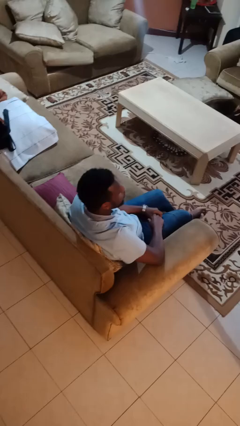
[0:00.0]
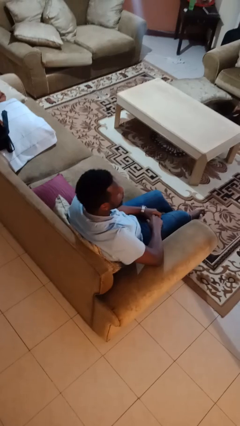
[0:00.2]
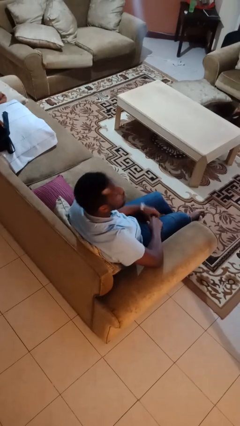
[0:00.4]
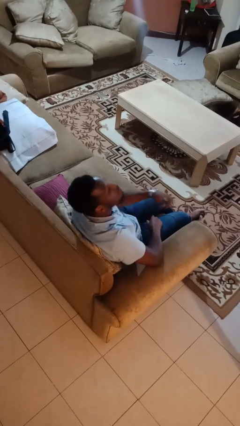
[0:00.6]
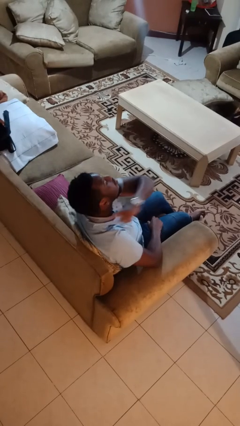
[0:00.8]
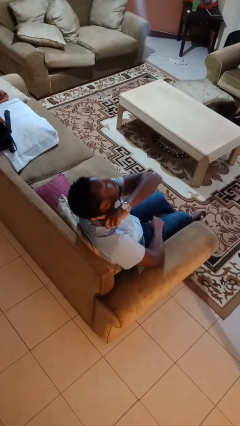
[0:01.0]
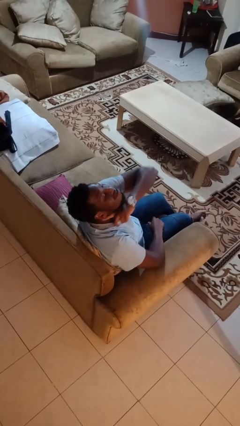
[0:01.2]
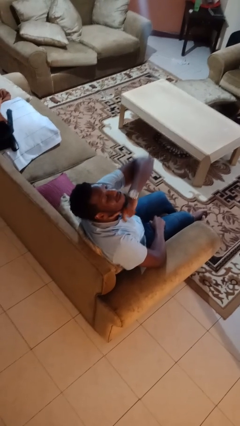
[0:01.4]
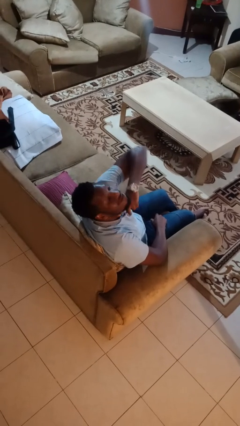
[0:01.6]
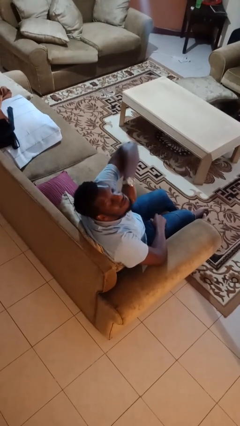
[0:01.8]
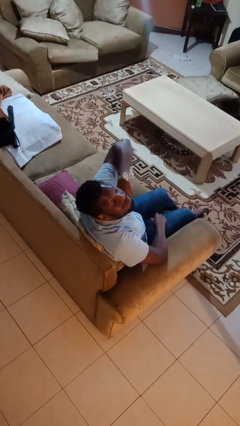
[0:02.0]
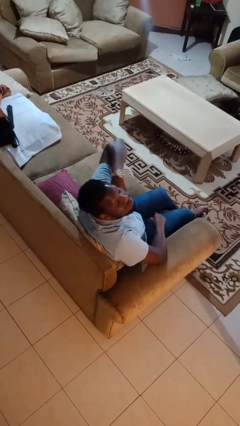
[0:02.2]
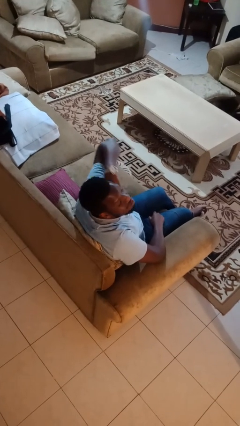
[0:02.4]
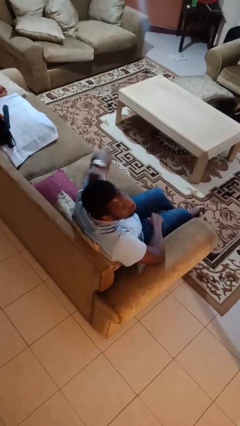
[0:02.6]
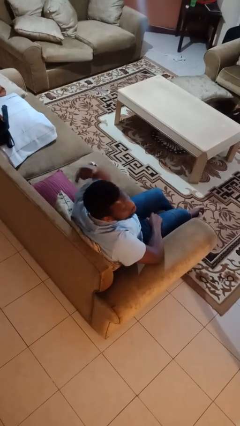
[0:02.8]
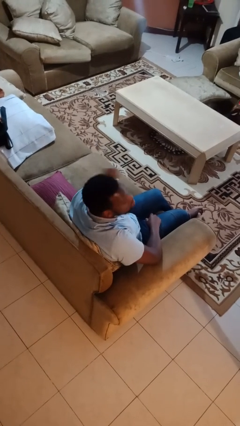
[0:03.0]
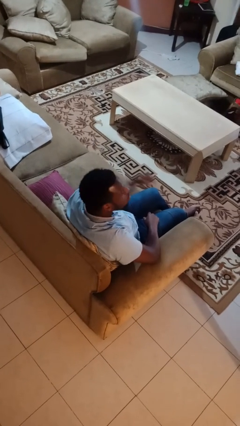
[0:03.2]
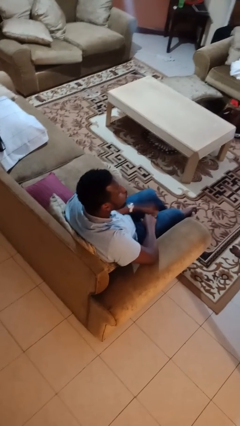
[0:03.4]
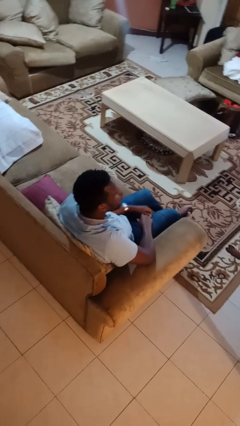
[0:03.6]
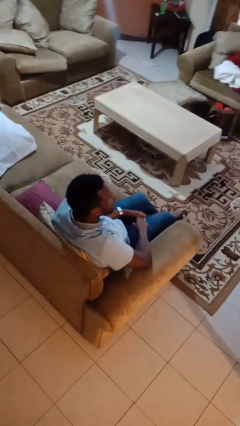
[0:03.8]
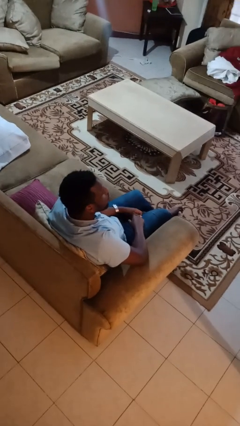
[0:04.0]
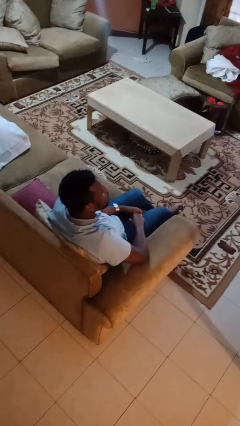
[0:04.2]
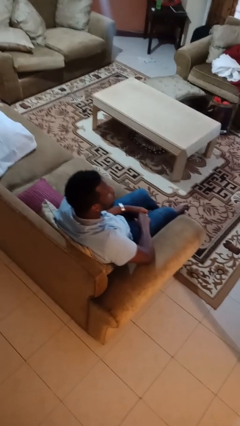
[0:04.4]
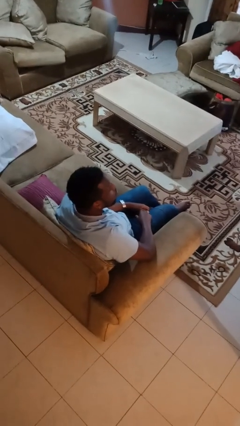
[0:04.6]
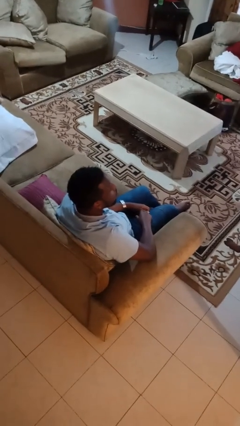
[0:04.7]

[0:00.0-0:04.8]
person gestures cut

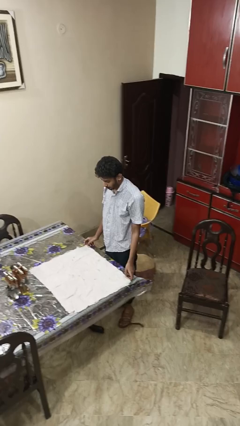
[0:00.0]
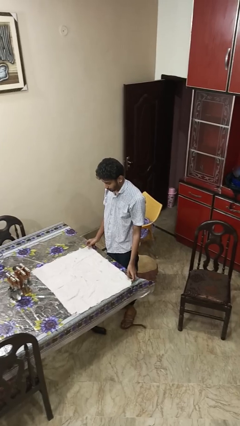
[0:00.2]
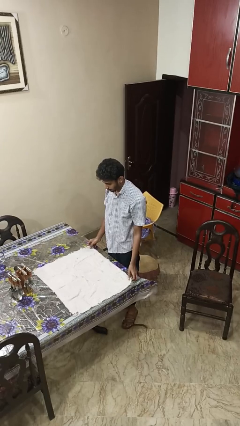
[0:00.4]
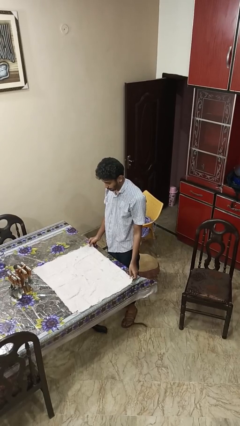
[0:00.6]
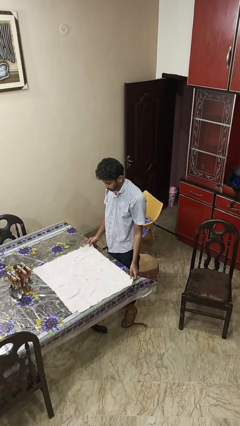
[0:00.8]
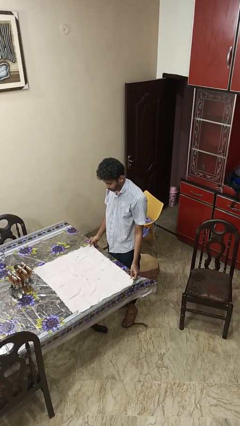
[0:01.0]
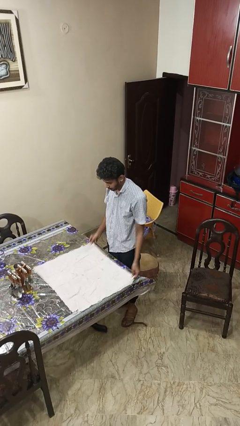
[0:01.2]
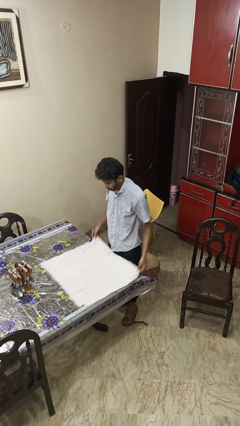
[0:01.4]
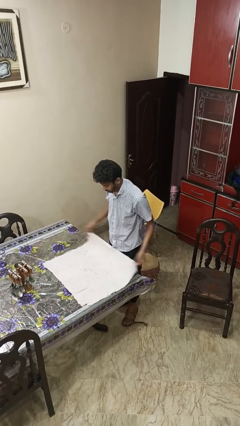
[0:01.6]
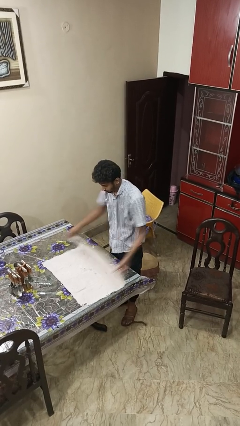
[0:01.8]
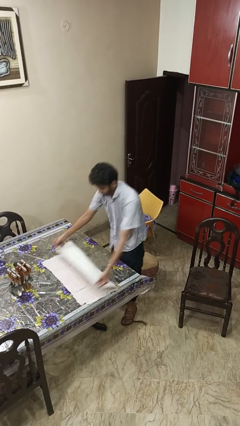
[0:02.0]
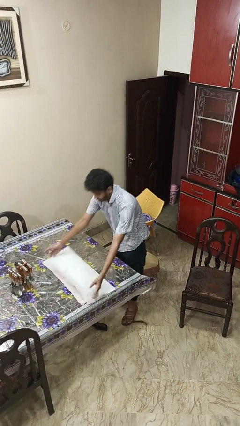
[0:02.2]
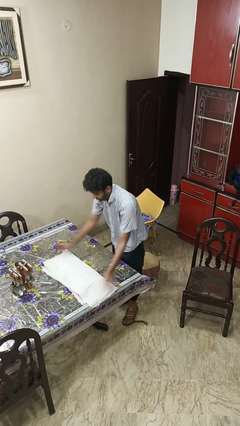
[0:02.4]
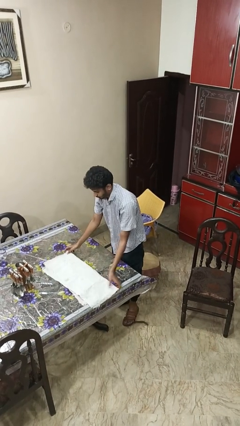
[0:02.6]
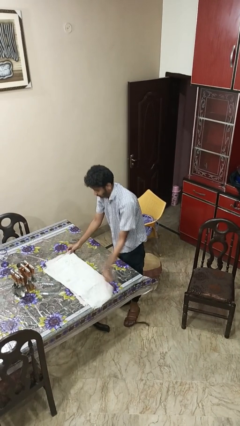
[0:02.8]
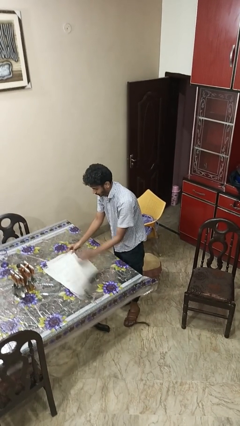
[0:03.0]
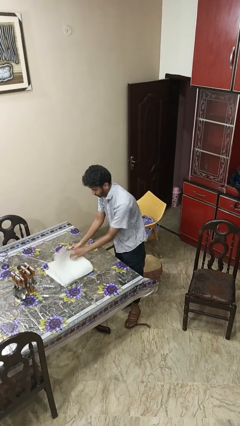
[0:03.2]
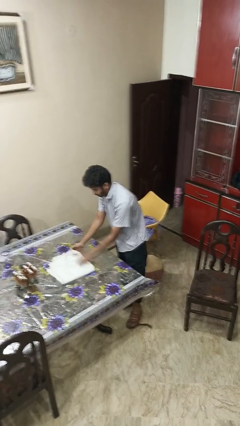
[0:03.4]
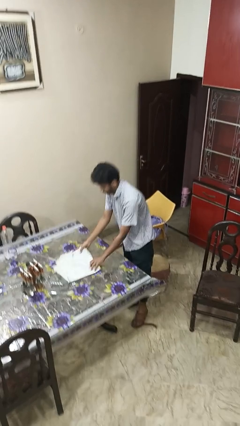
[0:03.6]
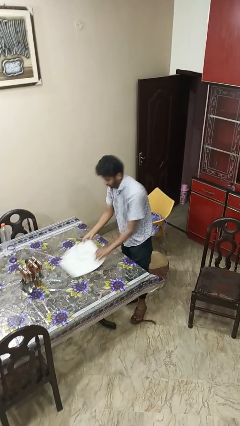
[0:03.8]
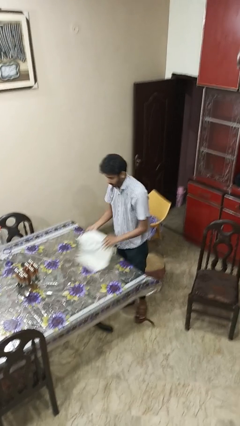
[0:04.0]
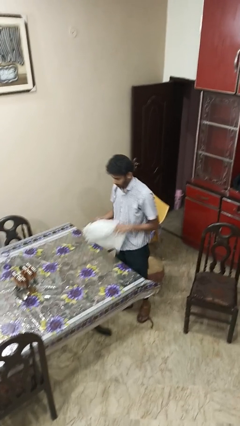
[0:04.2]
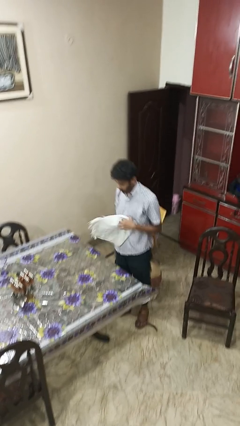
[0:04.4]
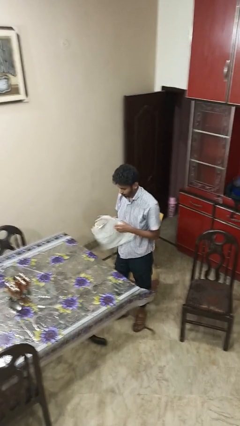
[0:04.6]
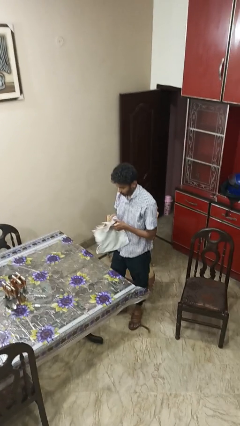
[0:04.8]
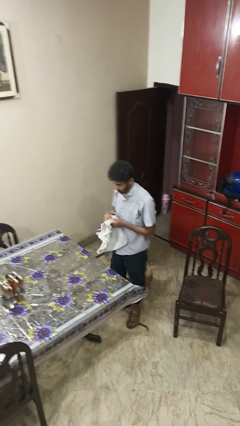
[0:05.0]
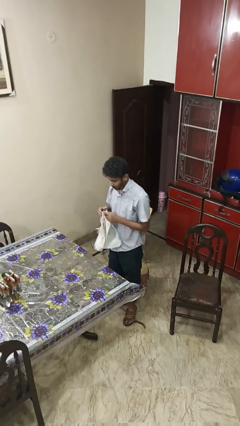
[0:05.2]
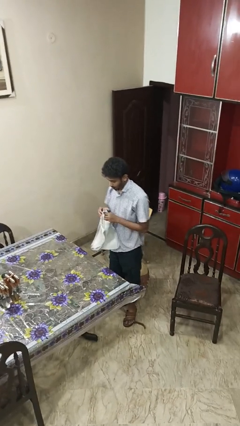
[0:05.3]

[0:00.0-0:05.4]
person folds tablecloth

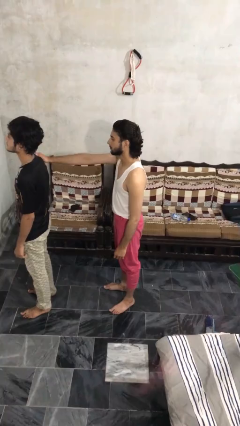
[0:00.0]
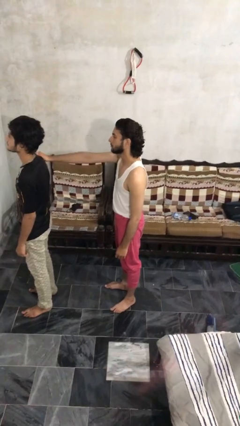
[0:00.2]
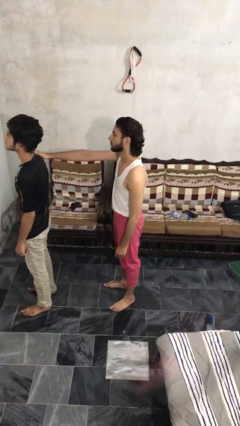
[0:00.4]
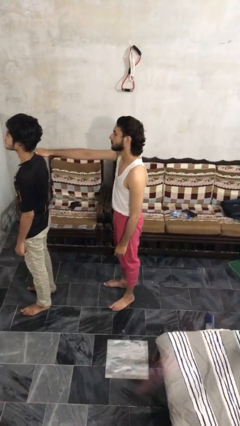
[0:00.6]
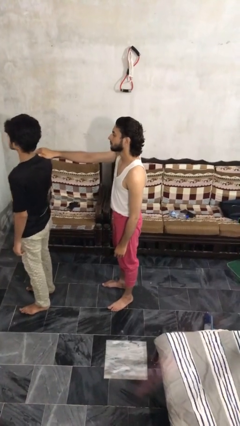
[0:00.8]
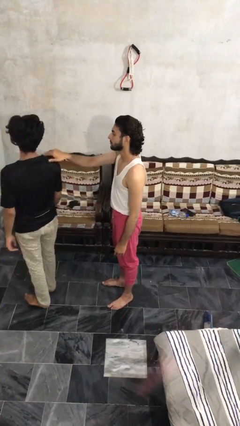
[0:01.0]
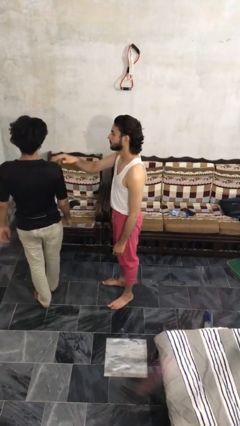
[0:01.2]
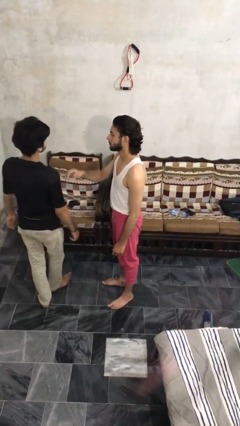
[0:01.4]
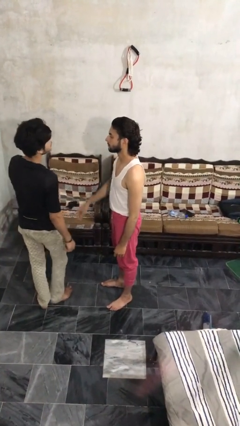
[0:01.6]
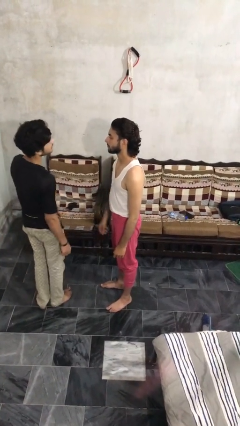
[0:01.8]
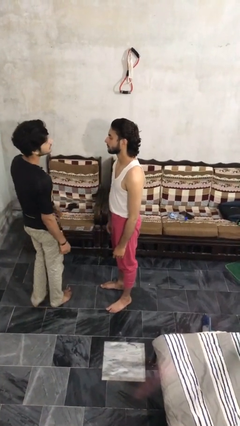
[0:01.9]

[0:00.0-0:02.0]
person spins person around

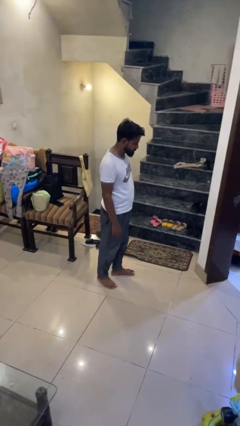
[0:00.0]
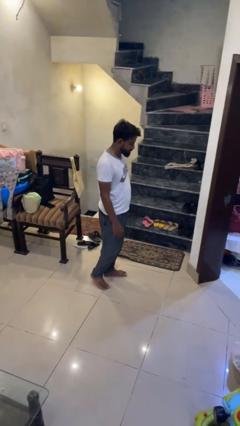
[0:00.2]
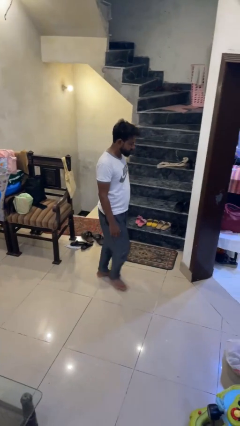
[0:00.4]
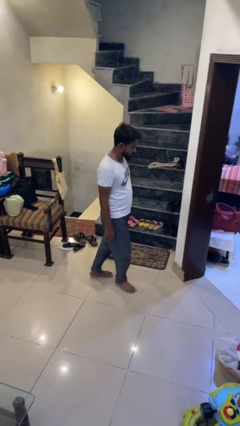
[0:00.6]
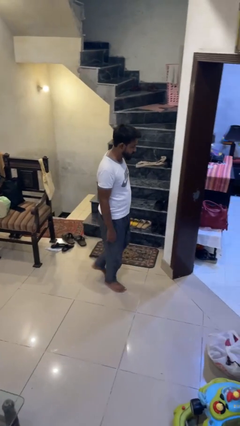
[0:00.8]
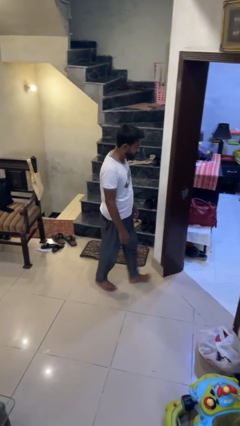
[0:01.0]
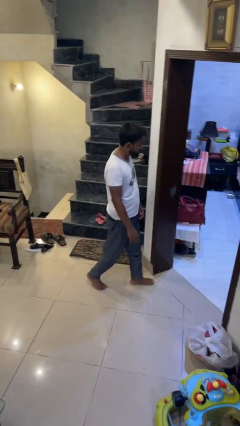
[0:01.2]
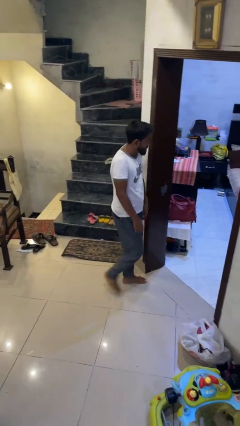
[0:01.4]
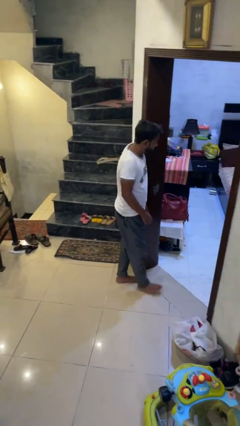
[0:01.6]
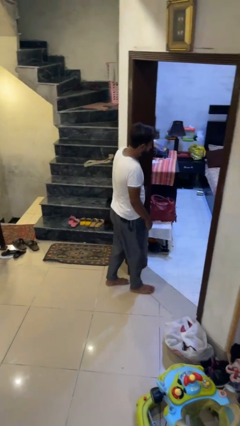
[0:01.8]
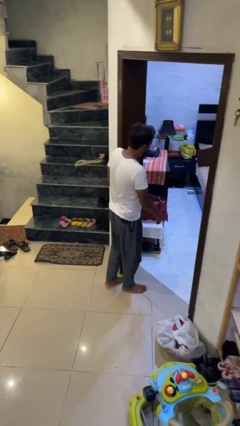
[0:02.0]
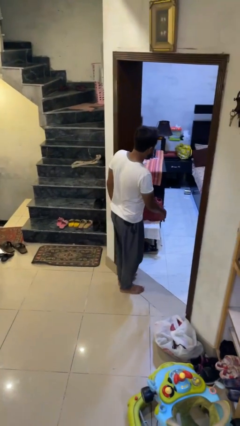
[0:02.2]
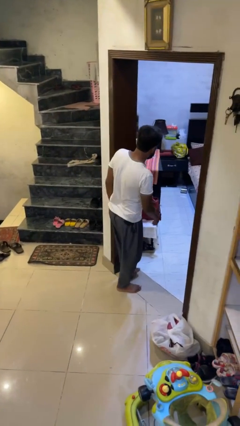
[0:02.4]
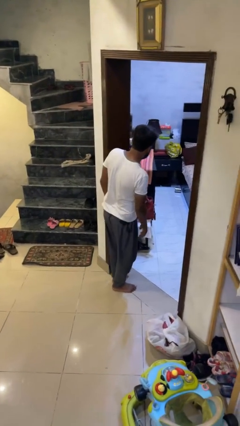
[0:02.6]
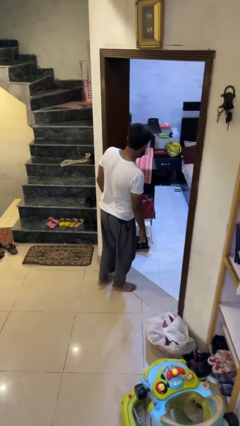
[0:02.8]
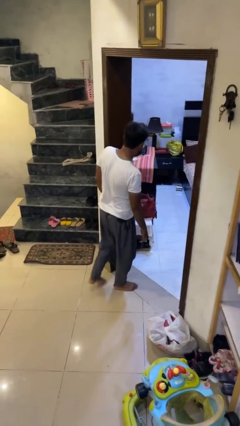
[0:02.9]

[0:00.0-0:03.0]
person bumps into wall

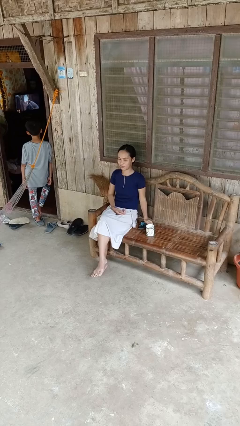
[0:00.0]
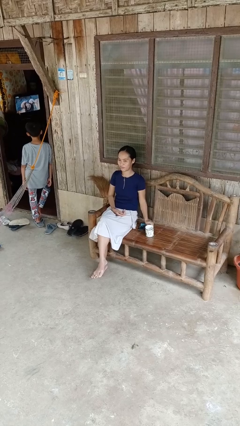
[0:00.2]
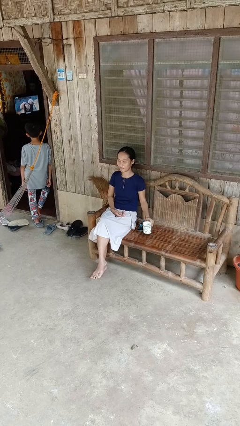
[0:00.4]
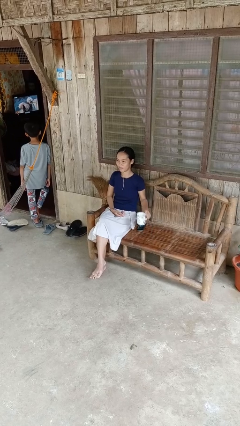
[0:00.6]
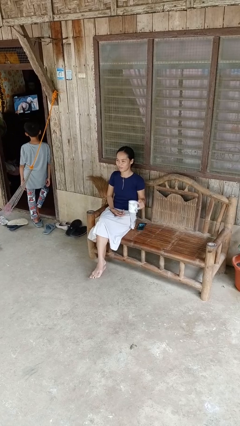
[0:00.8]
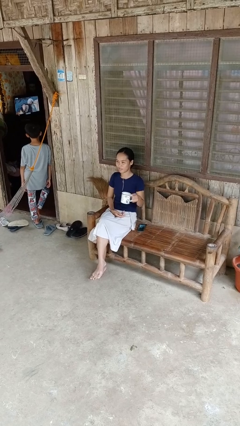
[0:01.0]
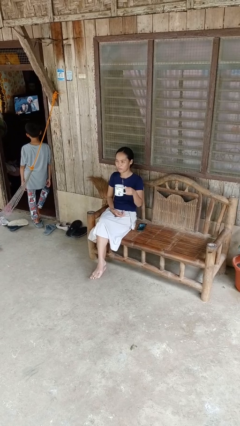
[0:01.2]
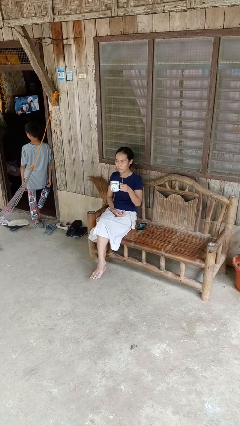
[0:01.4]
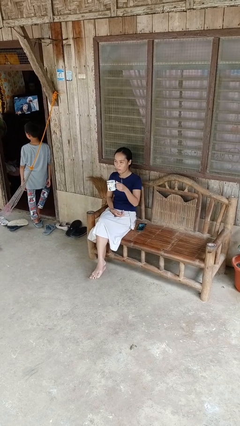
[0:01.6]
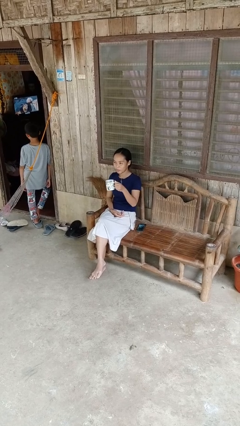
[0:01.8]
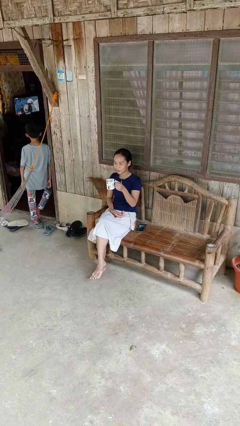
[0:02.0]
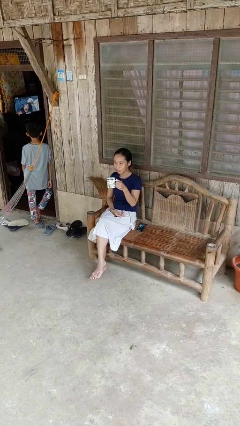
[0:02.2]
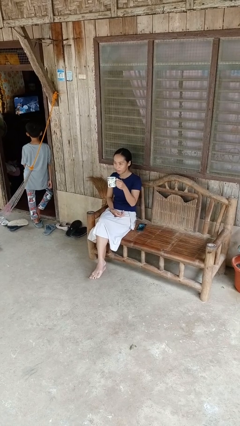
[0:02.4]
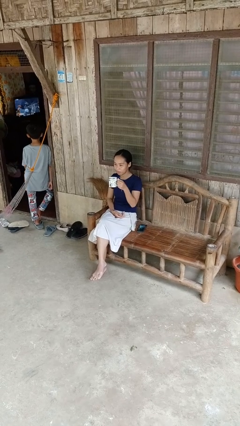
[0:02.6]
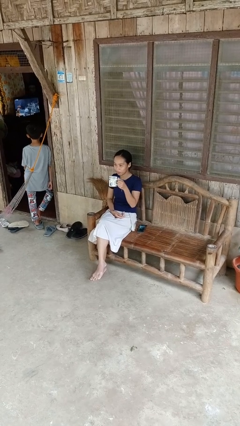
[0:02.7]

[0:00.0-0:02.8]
person picks up object from table
